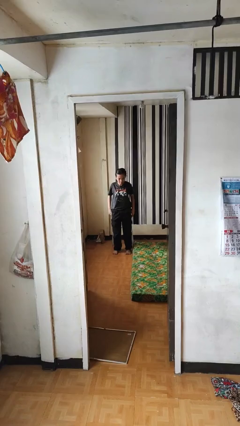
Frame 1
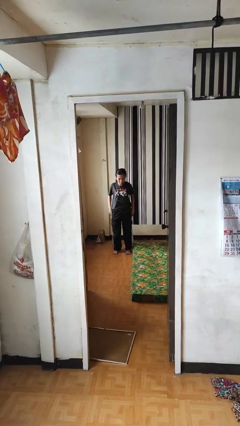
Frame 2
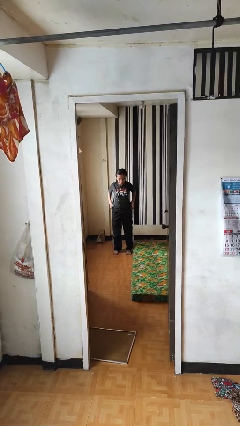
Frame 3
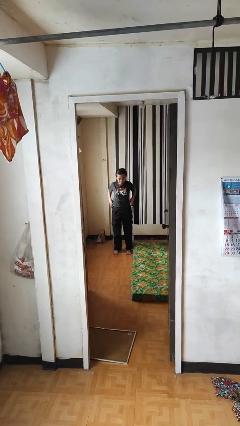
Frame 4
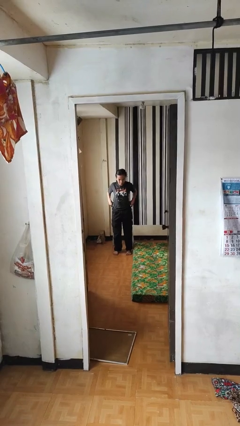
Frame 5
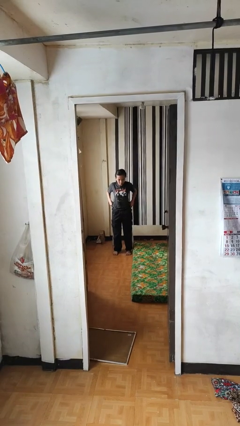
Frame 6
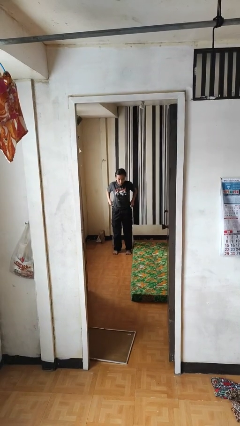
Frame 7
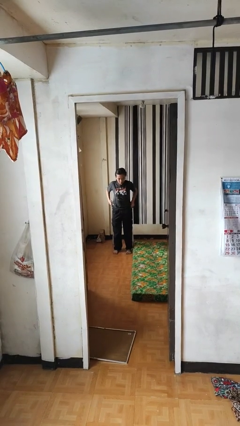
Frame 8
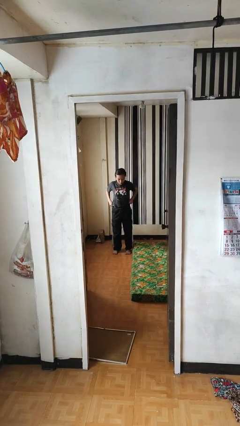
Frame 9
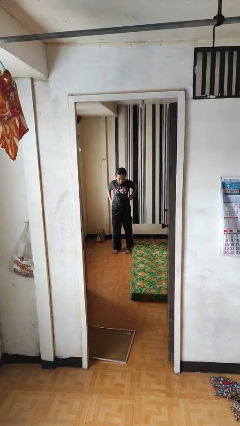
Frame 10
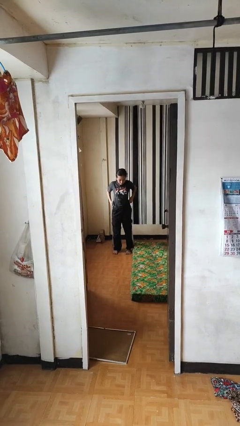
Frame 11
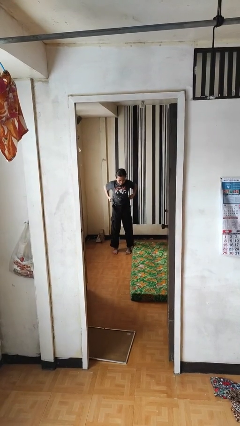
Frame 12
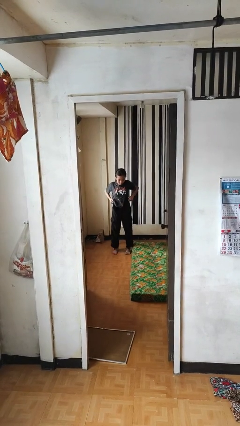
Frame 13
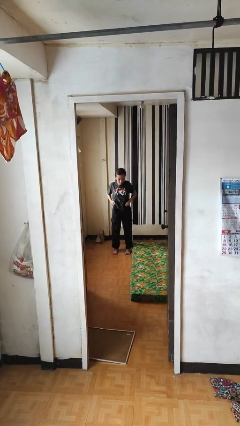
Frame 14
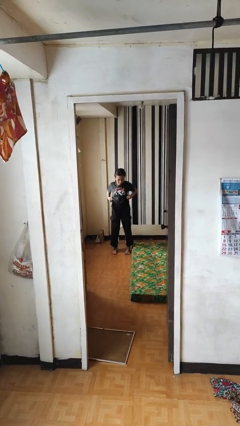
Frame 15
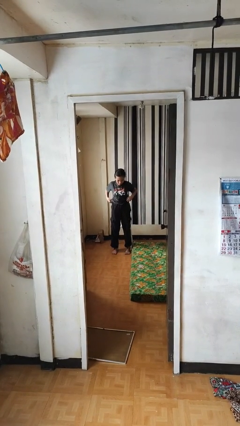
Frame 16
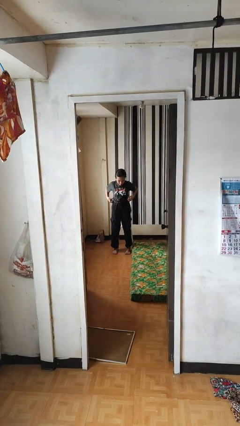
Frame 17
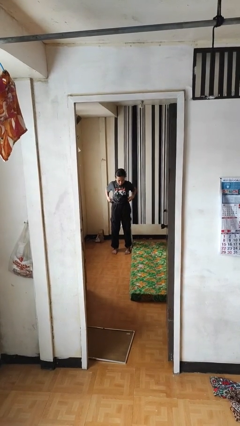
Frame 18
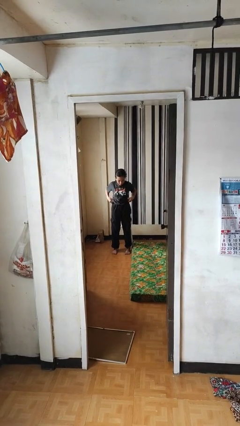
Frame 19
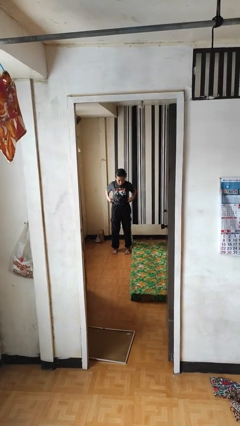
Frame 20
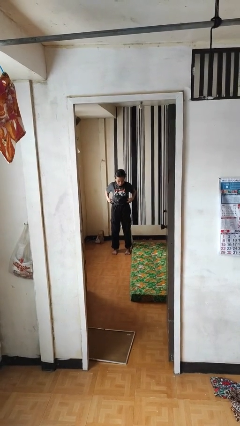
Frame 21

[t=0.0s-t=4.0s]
person hikes up pants

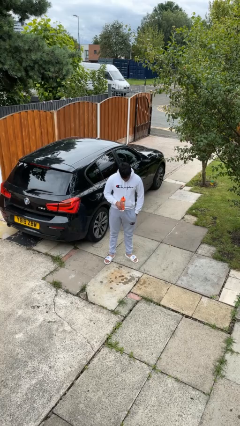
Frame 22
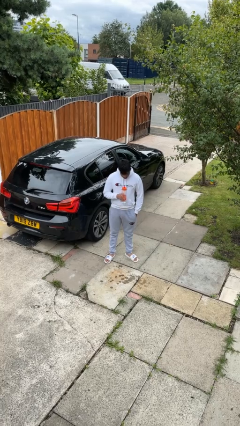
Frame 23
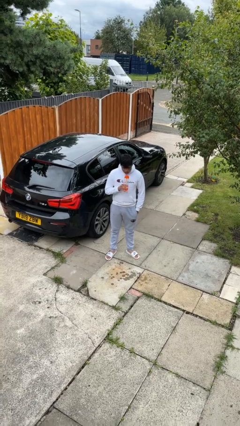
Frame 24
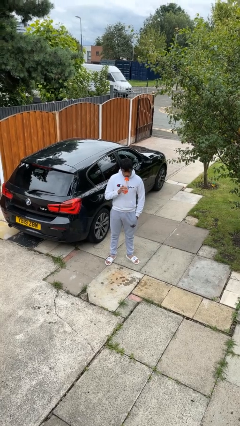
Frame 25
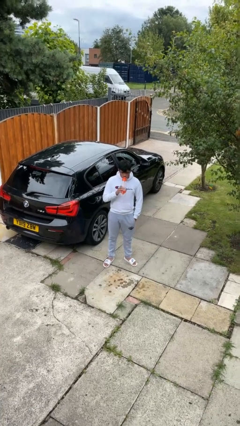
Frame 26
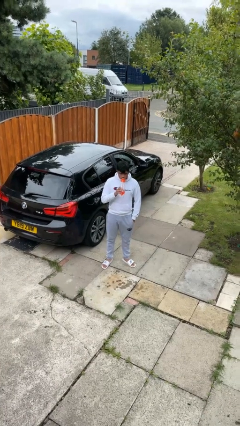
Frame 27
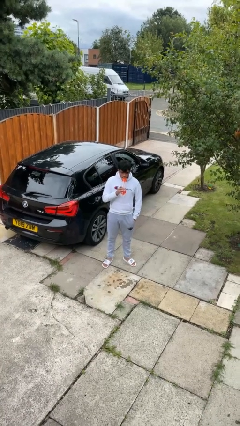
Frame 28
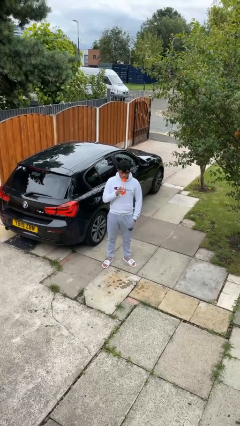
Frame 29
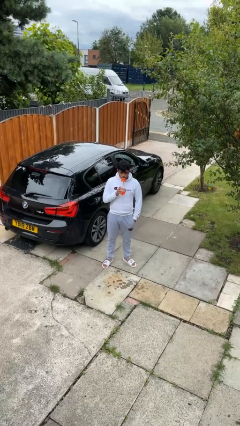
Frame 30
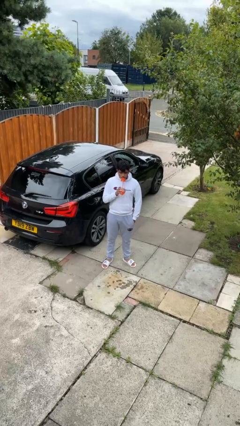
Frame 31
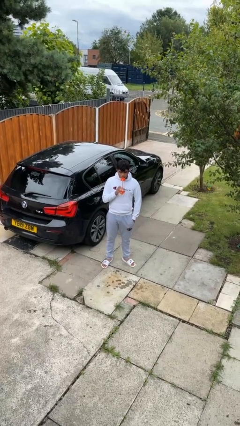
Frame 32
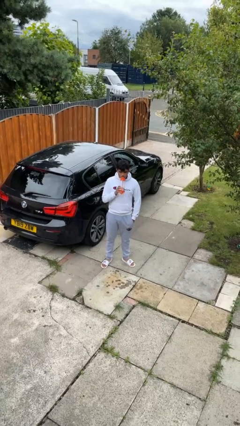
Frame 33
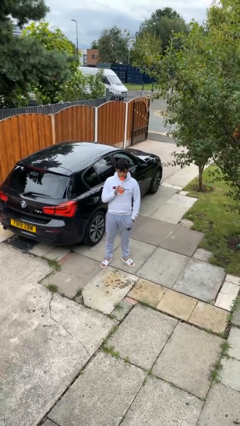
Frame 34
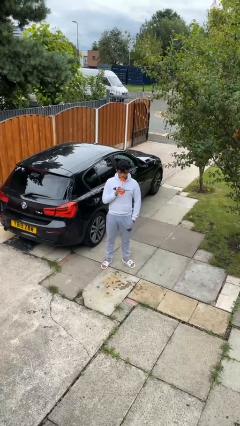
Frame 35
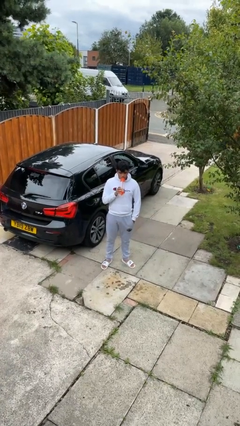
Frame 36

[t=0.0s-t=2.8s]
person drinks from bottle

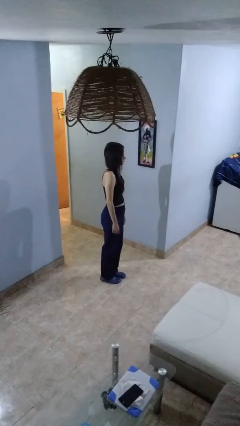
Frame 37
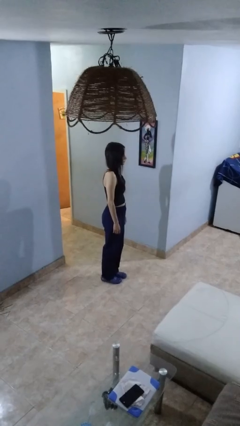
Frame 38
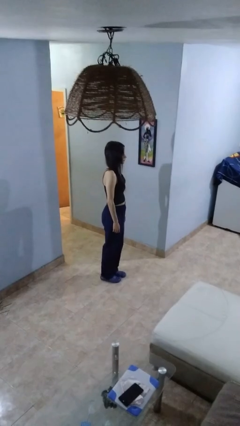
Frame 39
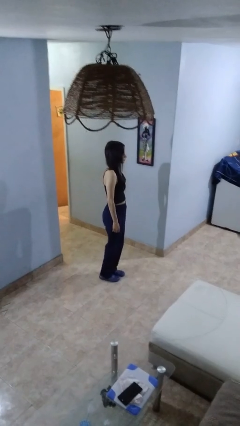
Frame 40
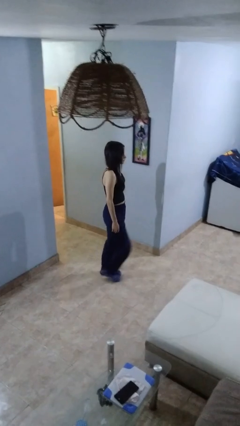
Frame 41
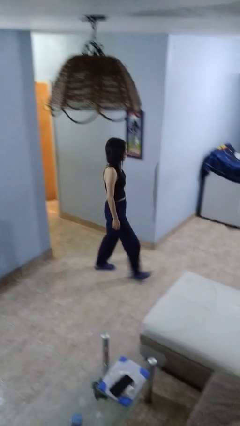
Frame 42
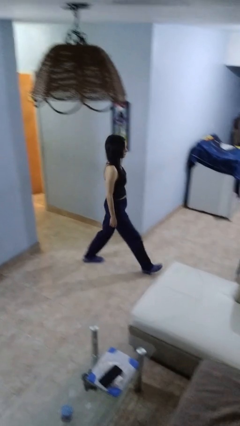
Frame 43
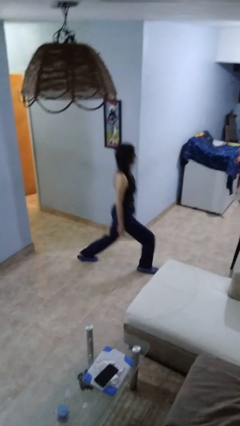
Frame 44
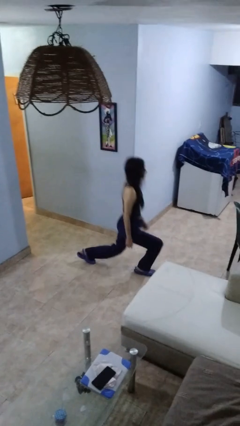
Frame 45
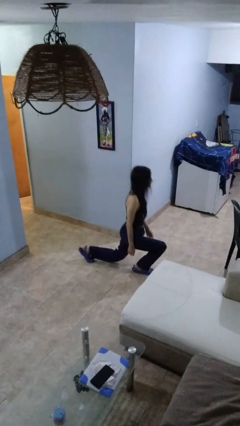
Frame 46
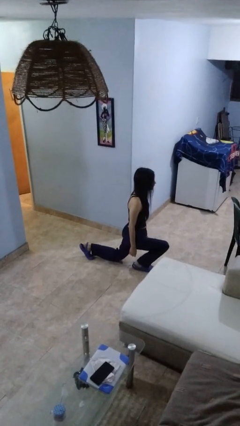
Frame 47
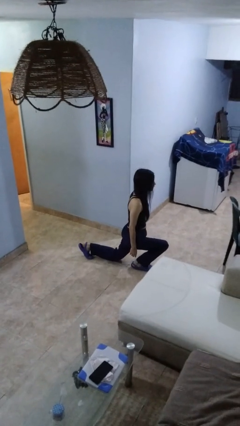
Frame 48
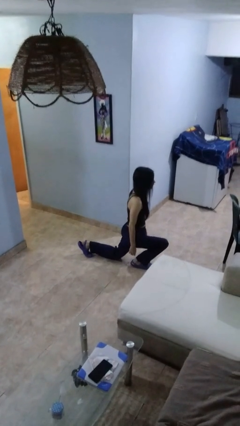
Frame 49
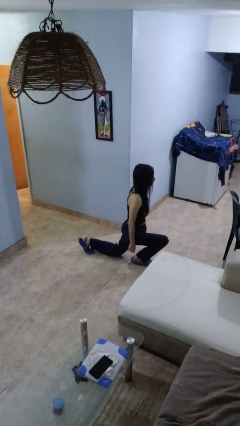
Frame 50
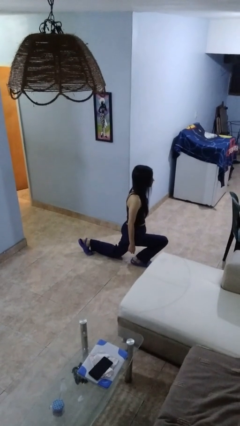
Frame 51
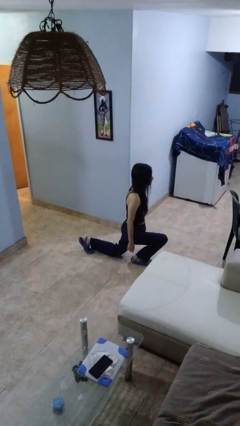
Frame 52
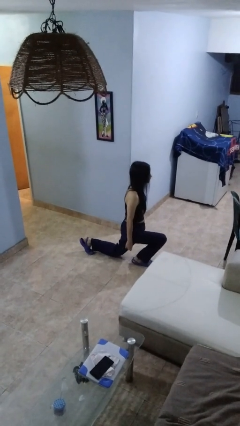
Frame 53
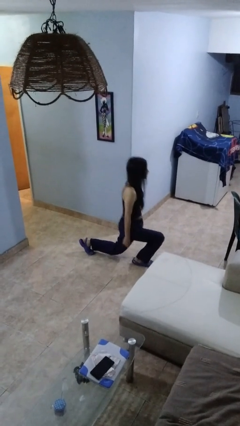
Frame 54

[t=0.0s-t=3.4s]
person exercises with lunges

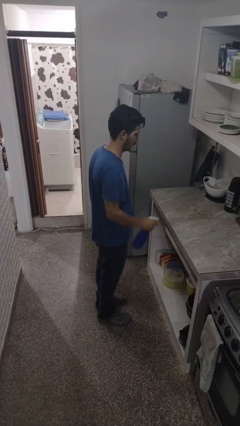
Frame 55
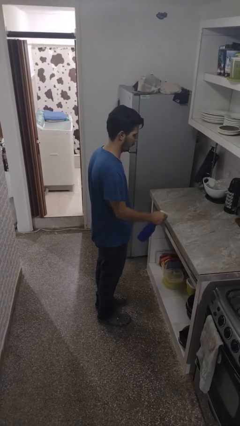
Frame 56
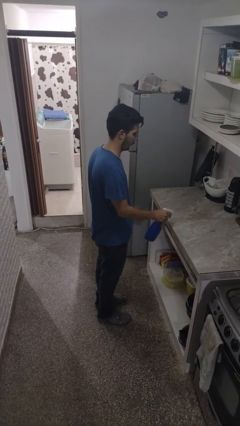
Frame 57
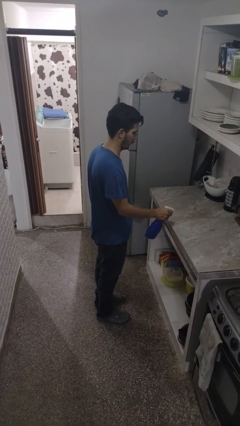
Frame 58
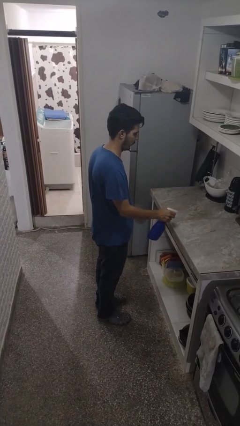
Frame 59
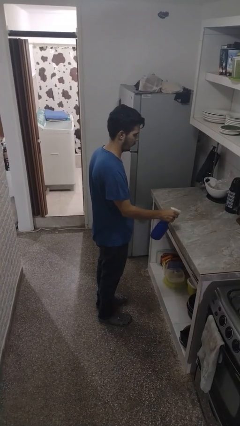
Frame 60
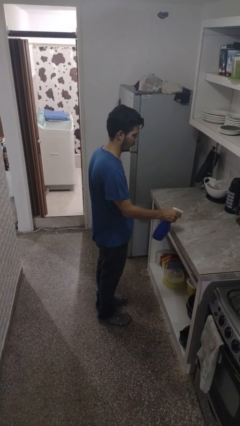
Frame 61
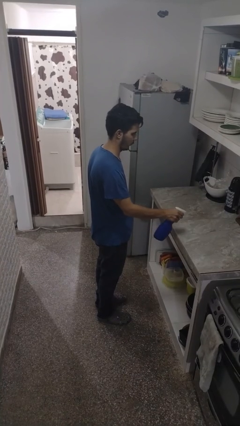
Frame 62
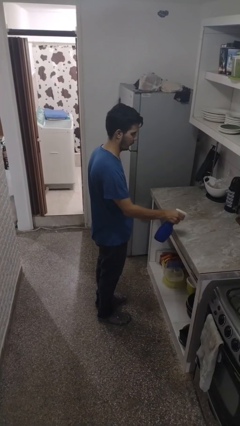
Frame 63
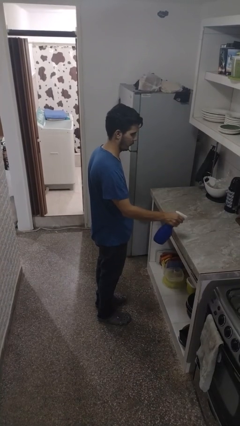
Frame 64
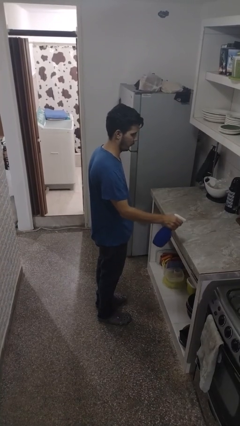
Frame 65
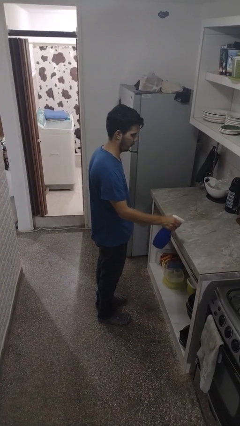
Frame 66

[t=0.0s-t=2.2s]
person sprays from bottle

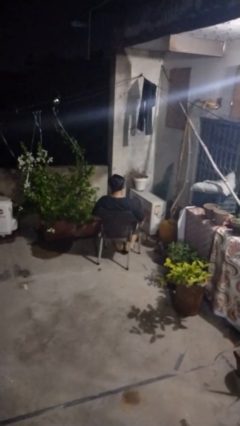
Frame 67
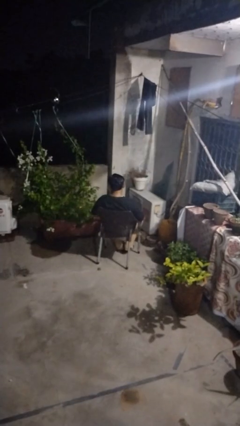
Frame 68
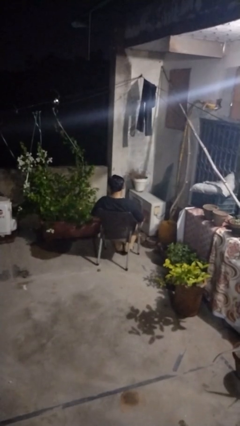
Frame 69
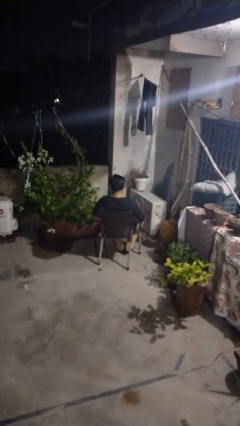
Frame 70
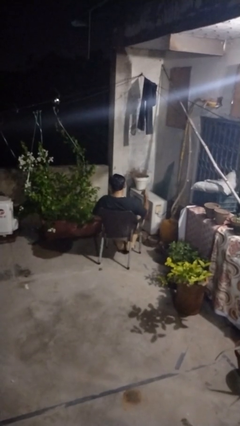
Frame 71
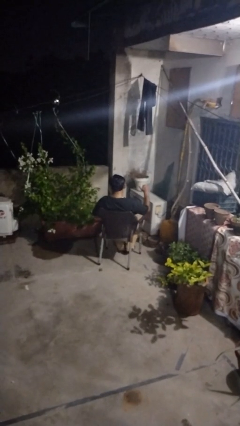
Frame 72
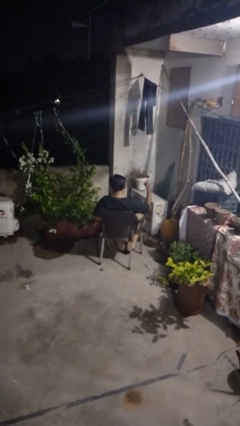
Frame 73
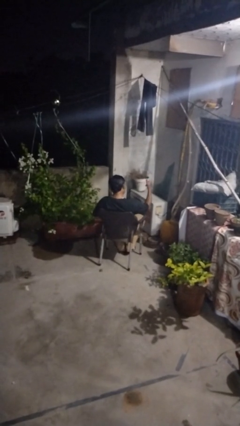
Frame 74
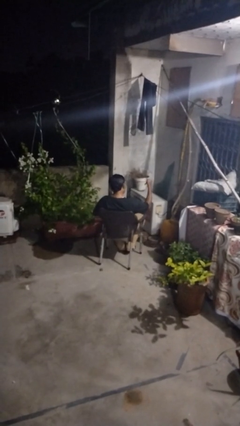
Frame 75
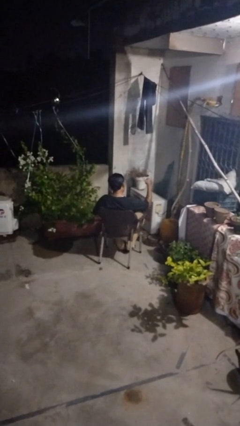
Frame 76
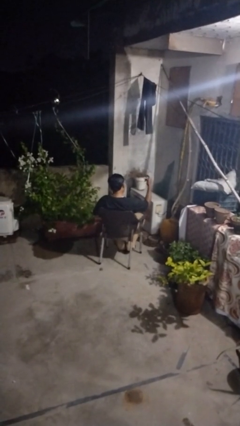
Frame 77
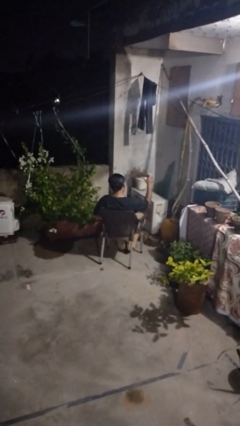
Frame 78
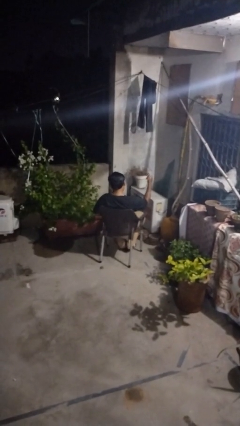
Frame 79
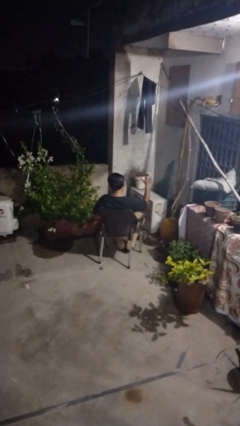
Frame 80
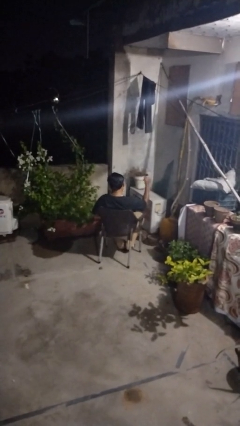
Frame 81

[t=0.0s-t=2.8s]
person gestures hang loose

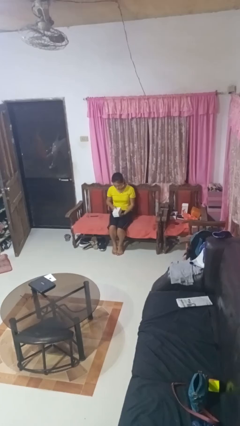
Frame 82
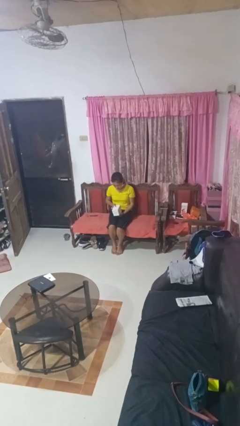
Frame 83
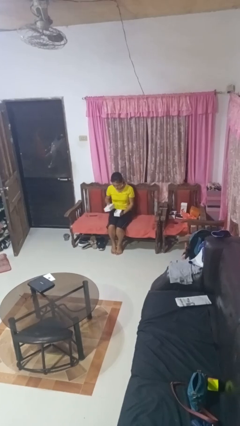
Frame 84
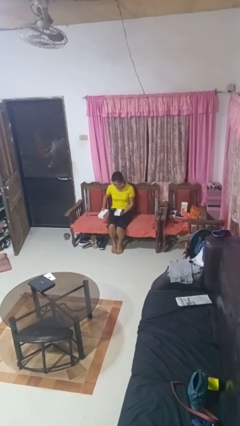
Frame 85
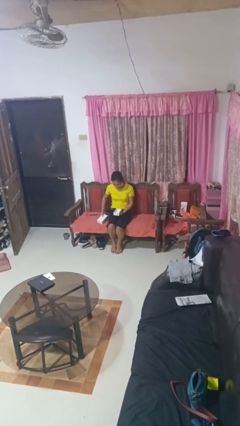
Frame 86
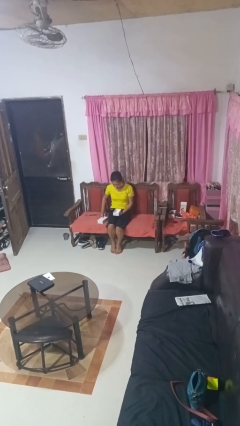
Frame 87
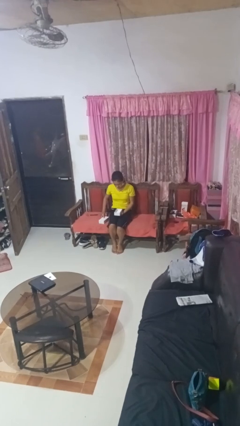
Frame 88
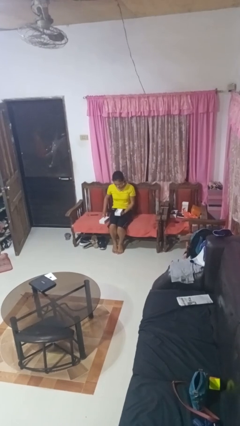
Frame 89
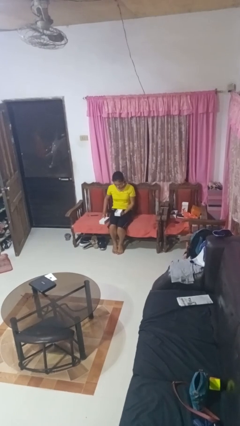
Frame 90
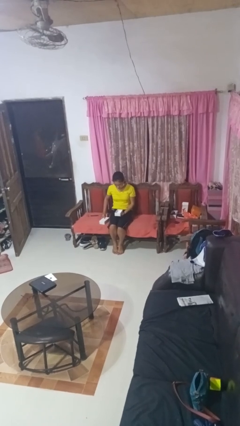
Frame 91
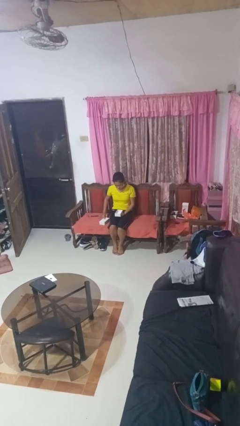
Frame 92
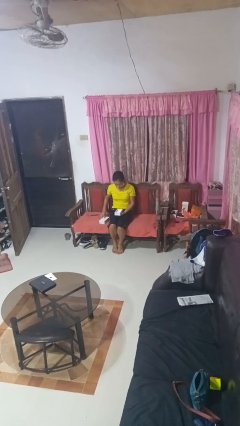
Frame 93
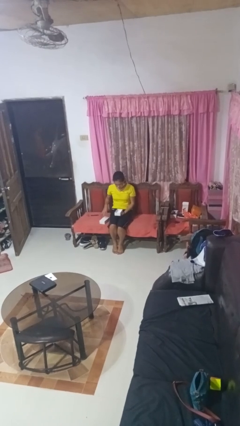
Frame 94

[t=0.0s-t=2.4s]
person opens jewelry box
